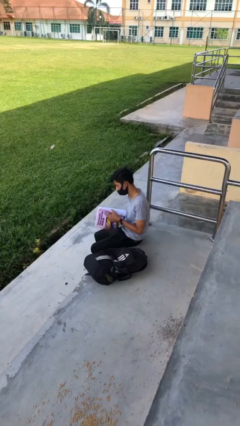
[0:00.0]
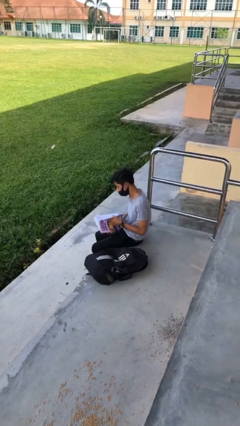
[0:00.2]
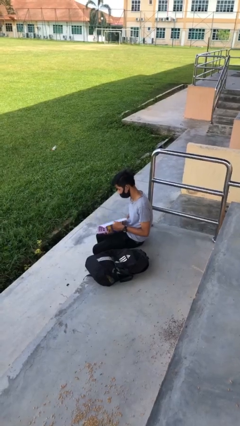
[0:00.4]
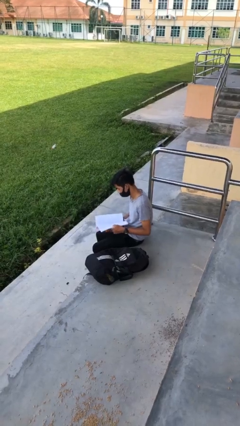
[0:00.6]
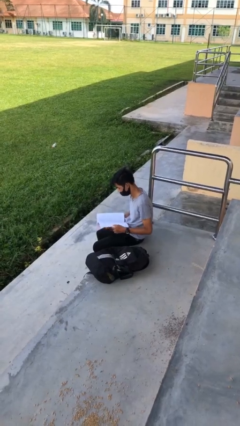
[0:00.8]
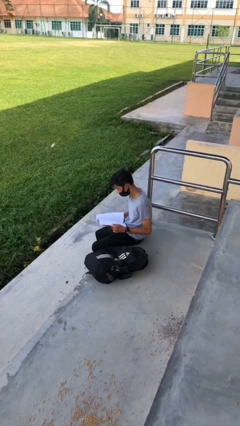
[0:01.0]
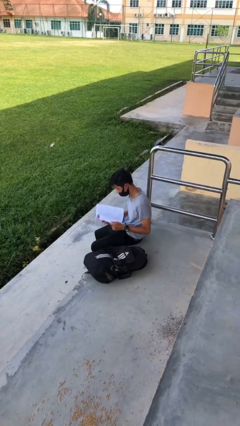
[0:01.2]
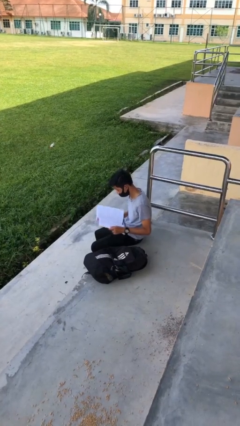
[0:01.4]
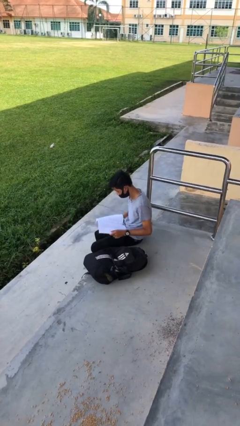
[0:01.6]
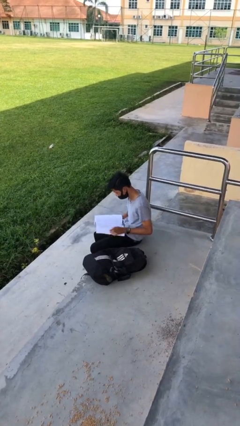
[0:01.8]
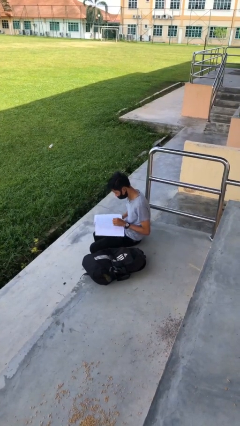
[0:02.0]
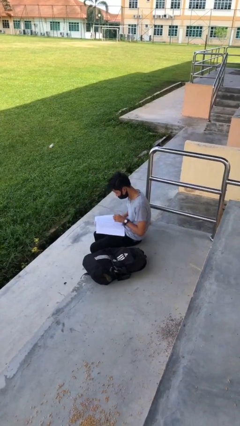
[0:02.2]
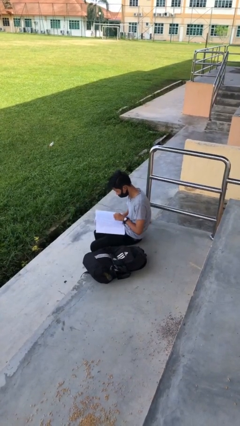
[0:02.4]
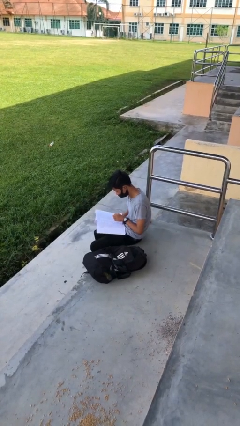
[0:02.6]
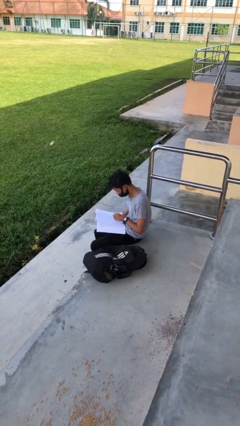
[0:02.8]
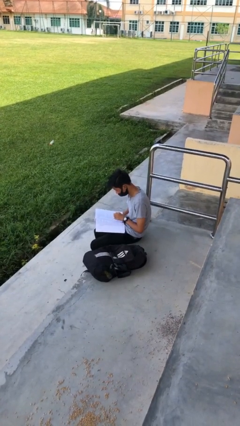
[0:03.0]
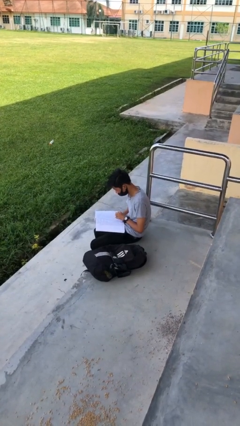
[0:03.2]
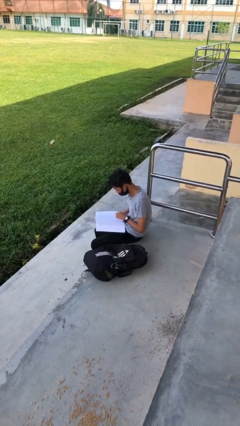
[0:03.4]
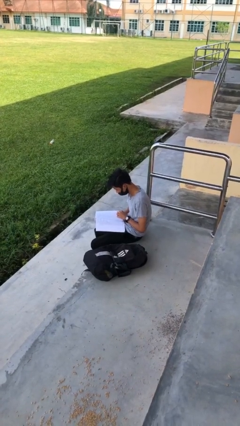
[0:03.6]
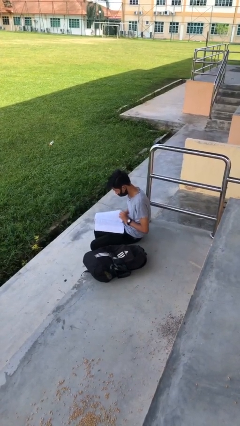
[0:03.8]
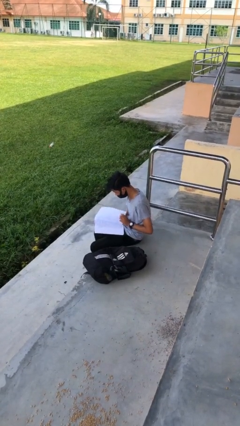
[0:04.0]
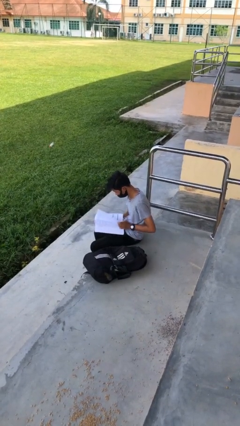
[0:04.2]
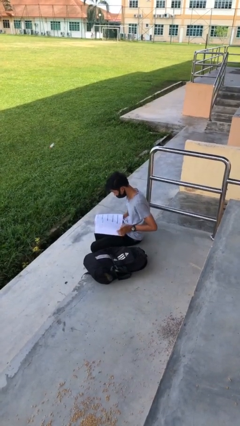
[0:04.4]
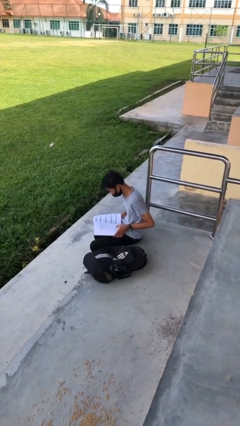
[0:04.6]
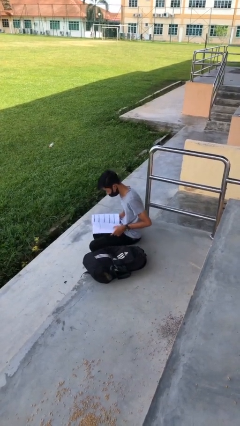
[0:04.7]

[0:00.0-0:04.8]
person reads document

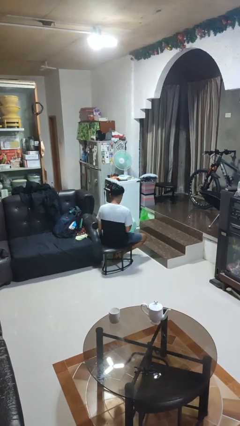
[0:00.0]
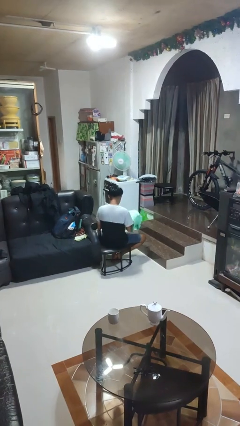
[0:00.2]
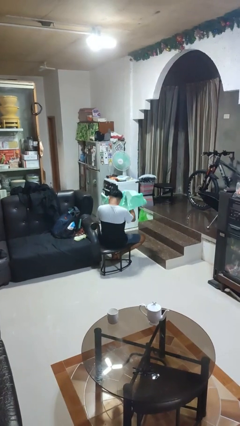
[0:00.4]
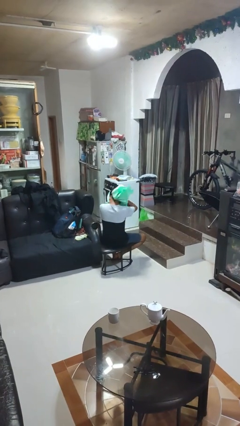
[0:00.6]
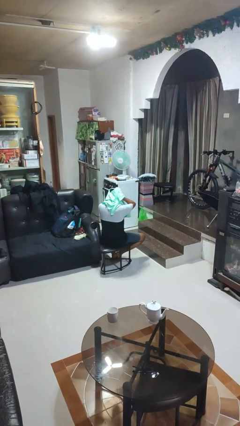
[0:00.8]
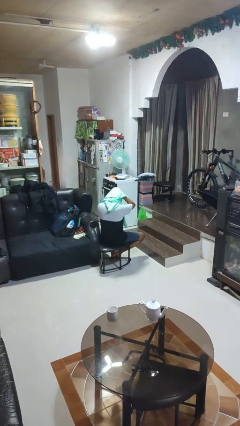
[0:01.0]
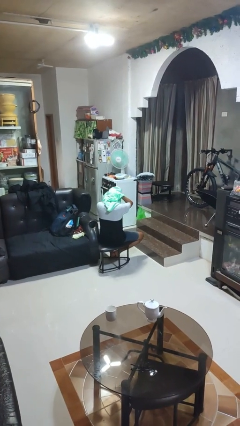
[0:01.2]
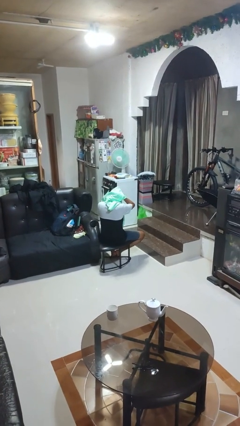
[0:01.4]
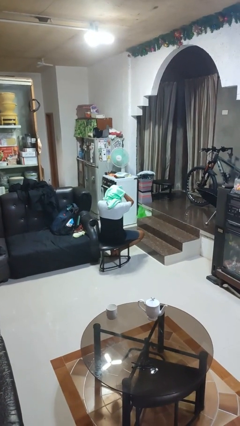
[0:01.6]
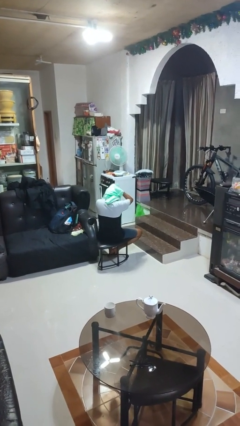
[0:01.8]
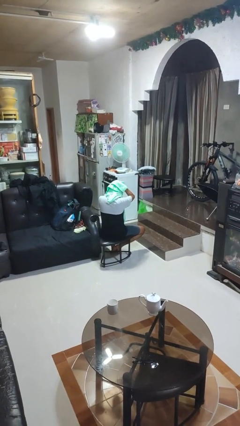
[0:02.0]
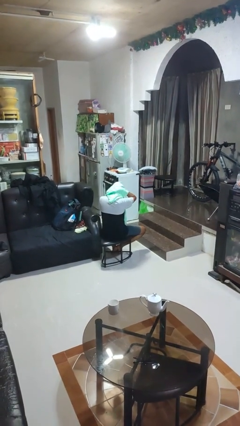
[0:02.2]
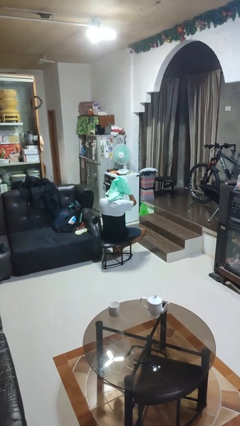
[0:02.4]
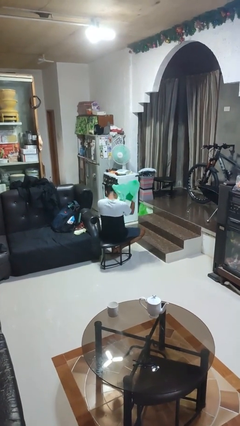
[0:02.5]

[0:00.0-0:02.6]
person dries hair with towel

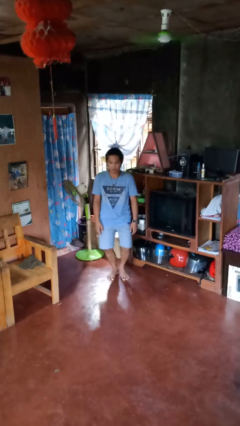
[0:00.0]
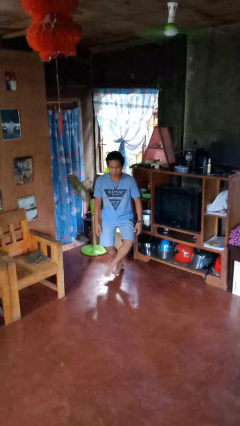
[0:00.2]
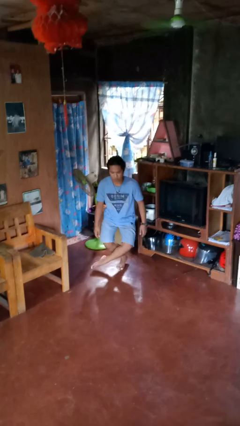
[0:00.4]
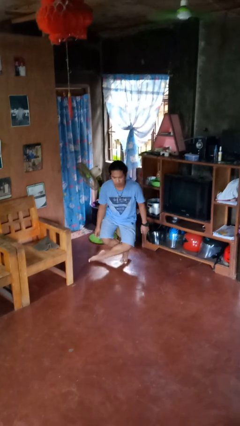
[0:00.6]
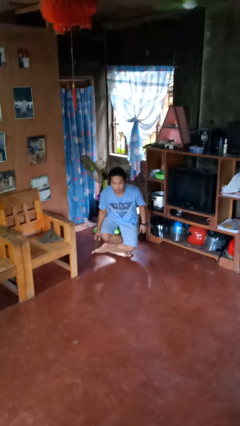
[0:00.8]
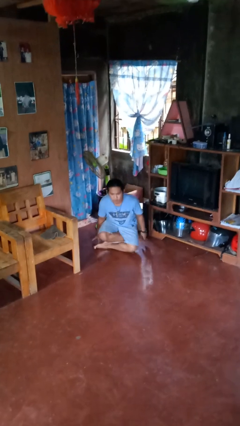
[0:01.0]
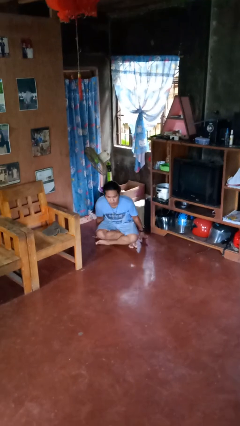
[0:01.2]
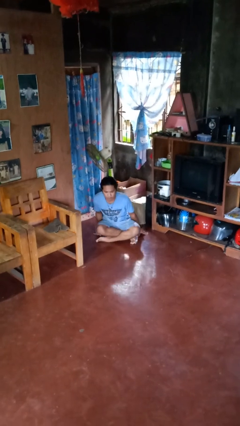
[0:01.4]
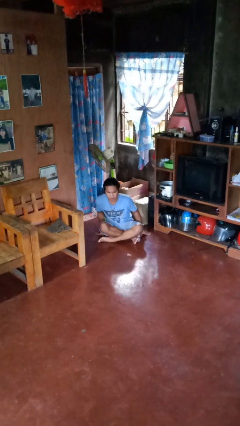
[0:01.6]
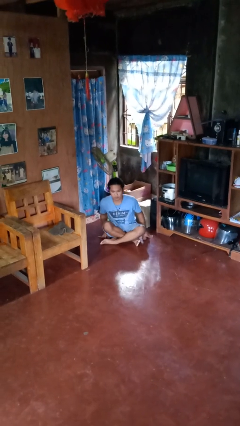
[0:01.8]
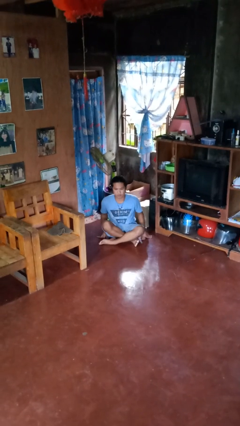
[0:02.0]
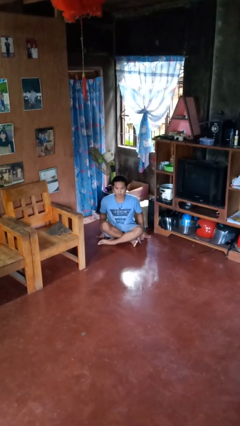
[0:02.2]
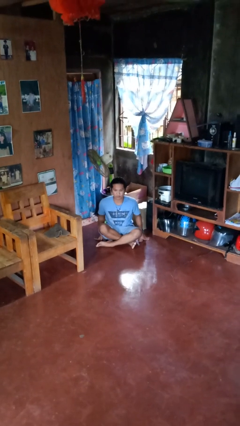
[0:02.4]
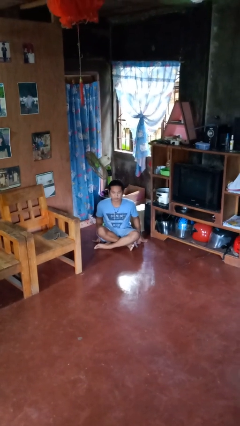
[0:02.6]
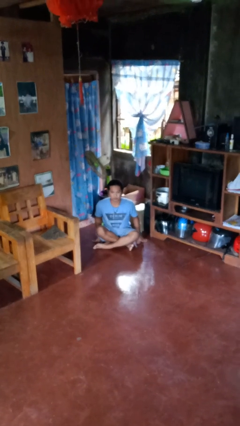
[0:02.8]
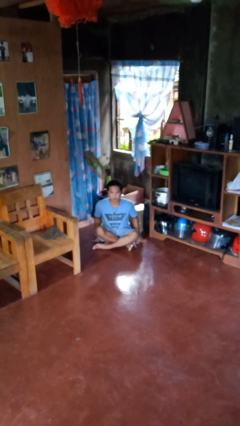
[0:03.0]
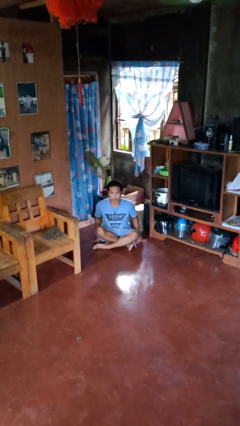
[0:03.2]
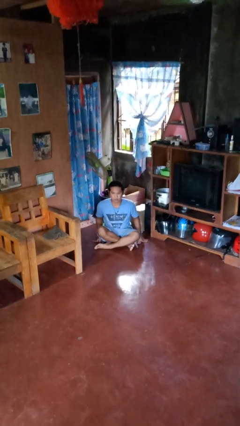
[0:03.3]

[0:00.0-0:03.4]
person sits crisscross

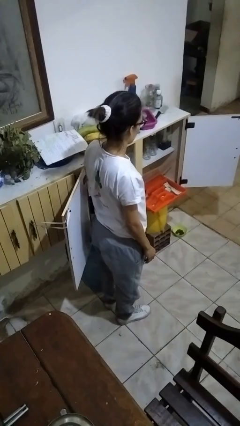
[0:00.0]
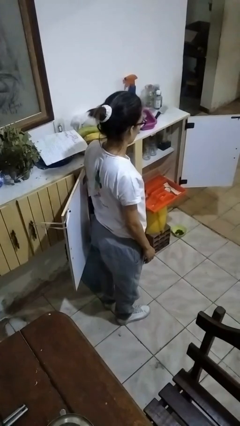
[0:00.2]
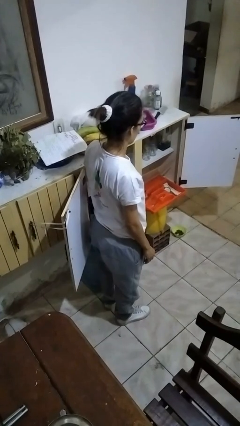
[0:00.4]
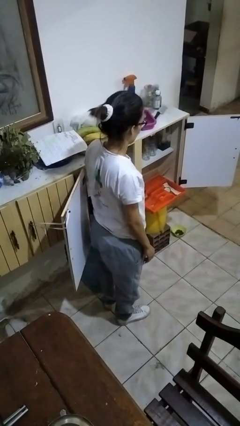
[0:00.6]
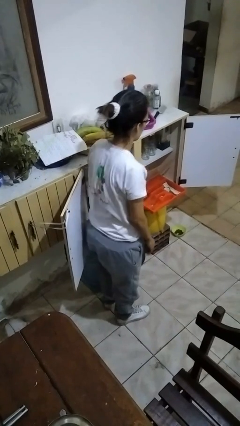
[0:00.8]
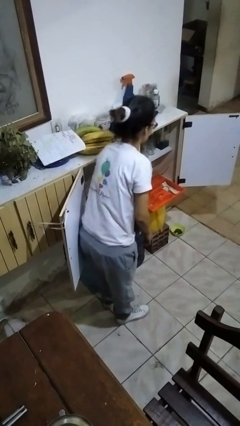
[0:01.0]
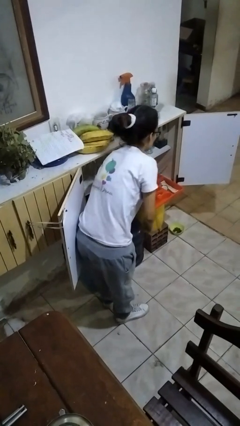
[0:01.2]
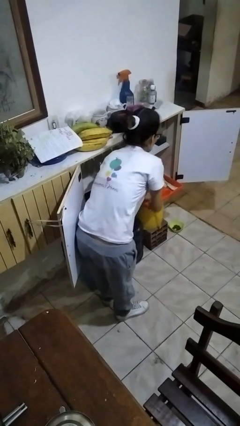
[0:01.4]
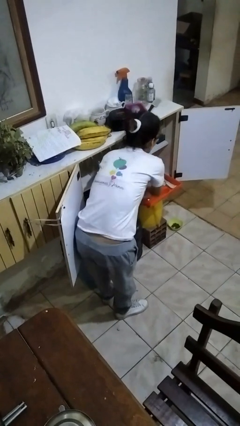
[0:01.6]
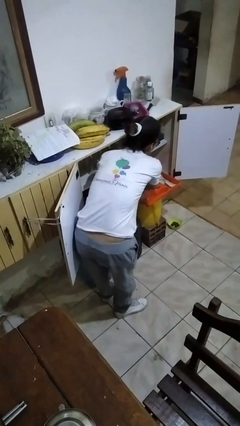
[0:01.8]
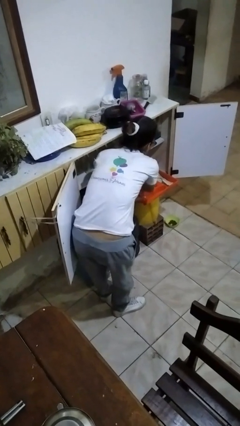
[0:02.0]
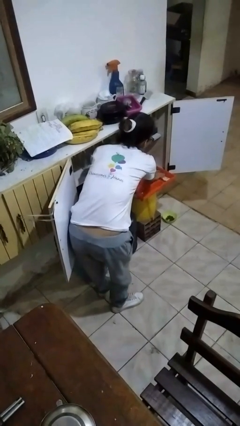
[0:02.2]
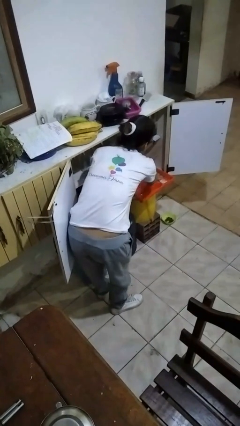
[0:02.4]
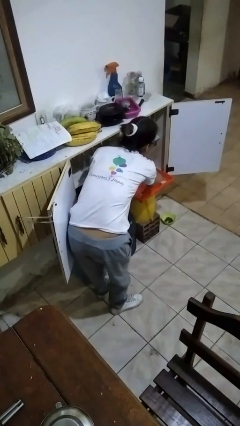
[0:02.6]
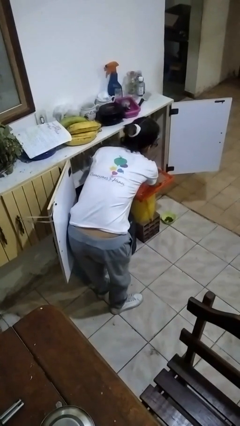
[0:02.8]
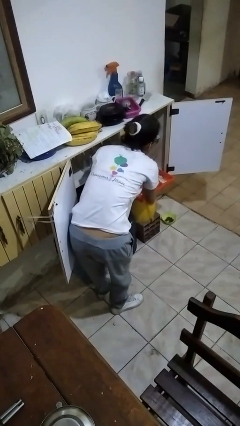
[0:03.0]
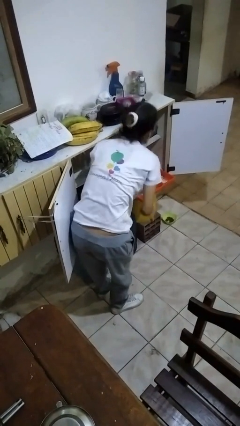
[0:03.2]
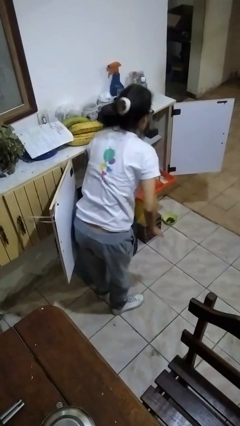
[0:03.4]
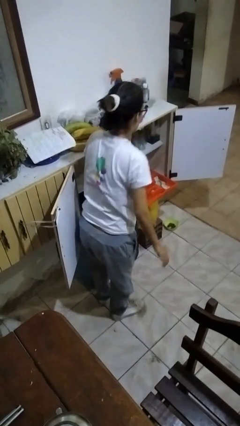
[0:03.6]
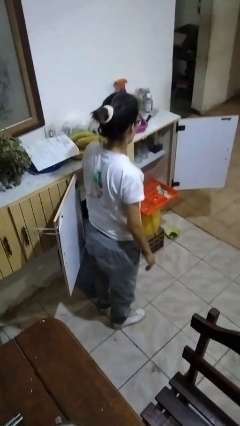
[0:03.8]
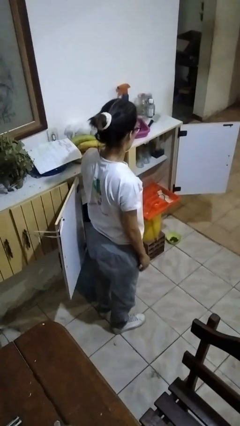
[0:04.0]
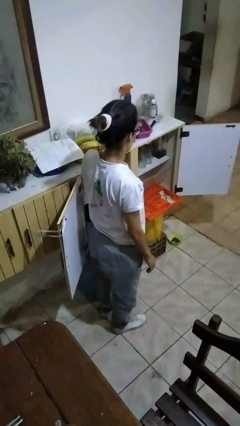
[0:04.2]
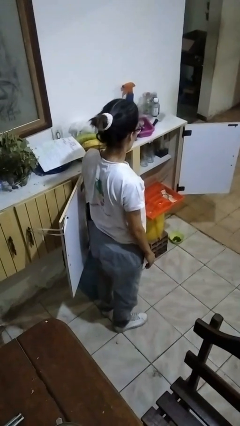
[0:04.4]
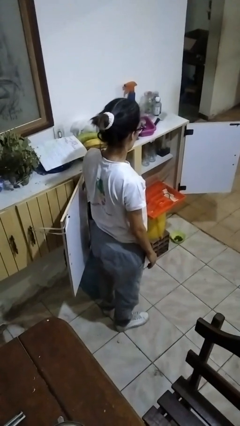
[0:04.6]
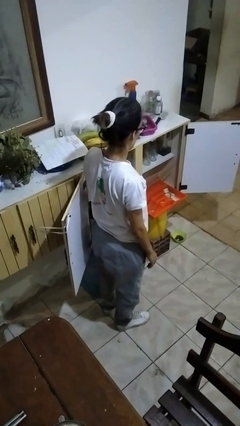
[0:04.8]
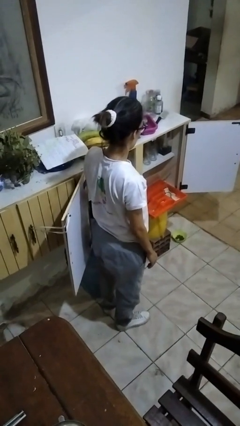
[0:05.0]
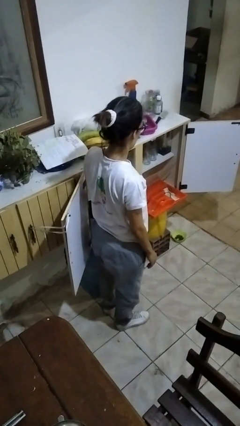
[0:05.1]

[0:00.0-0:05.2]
person searches in kitchen drawer

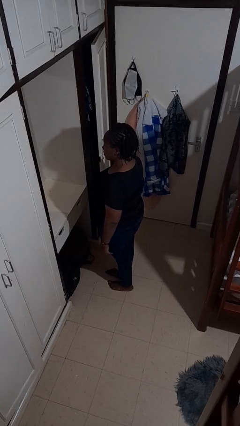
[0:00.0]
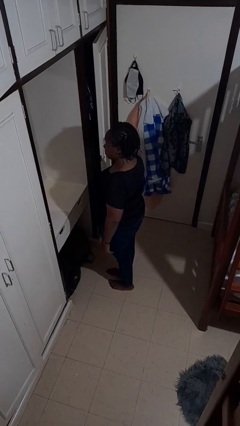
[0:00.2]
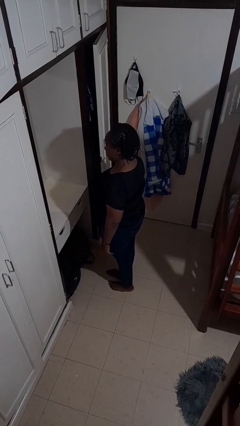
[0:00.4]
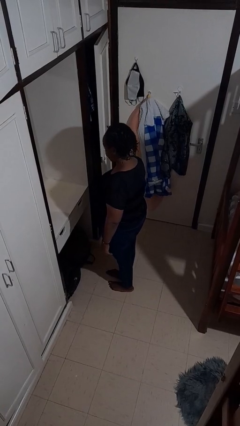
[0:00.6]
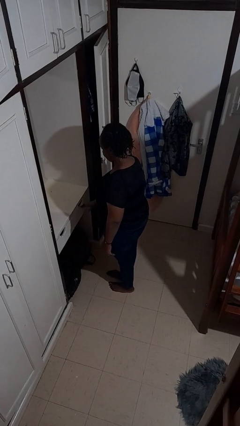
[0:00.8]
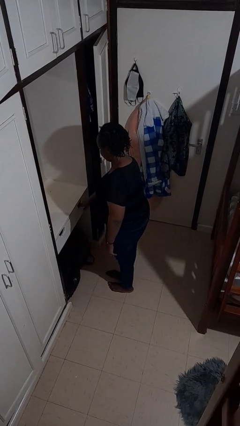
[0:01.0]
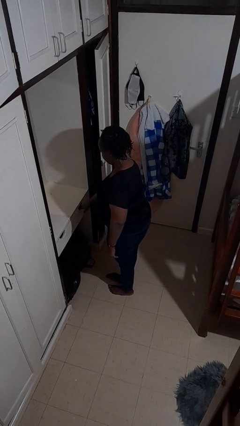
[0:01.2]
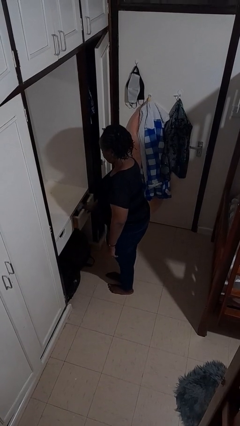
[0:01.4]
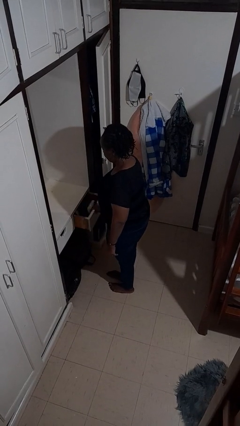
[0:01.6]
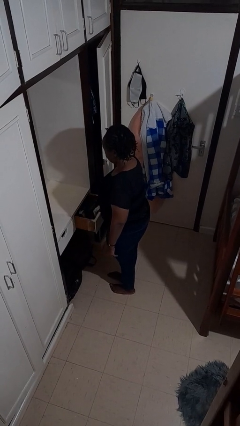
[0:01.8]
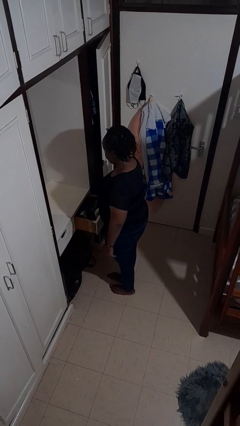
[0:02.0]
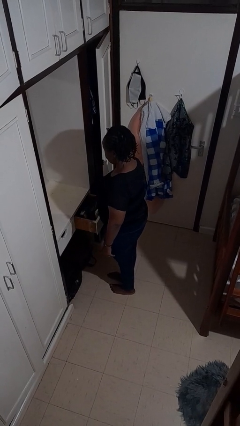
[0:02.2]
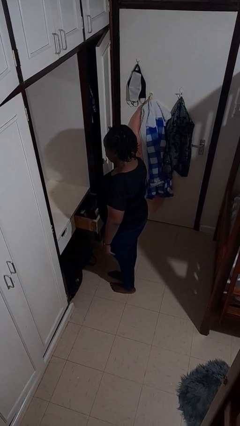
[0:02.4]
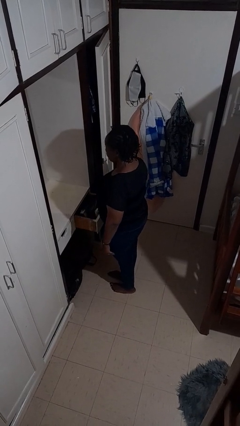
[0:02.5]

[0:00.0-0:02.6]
person opens dresser drawer
